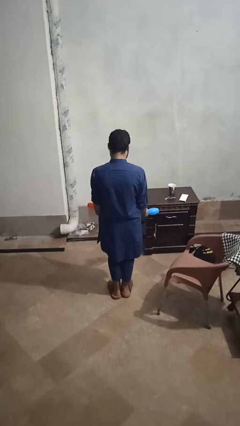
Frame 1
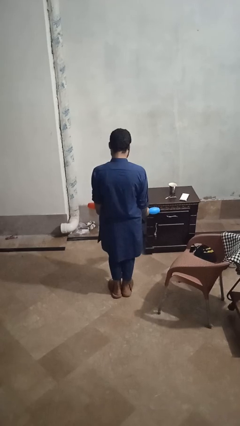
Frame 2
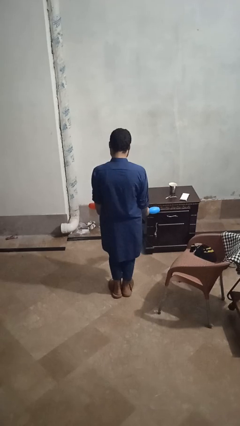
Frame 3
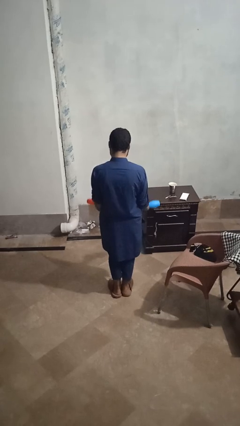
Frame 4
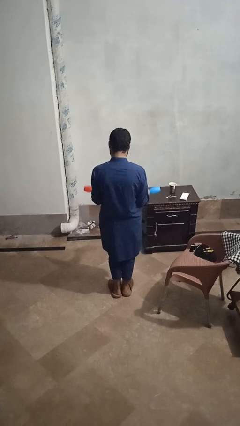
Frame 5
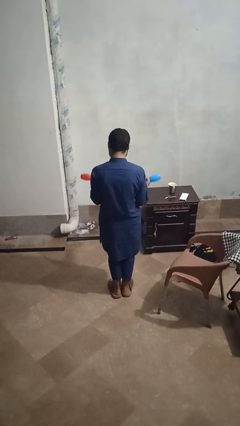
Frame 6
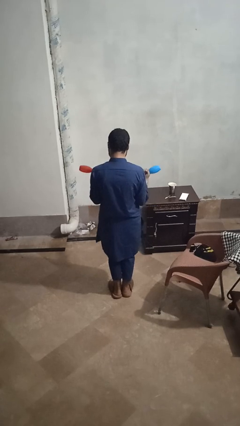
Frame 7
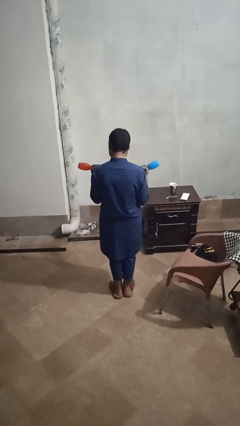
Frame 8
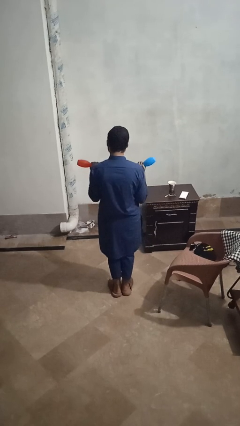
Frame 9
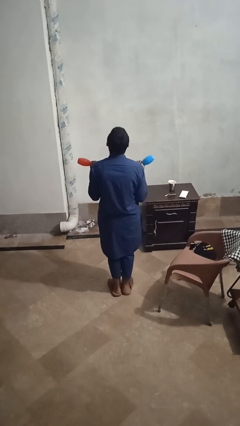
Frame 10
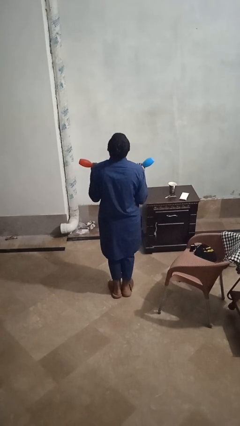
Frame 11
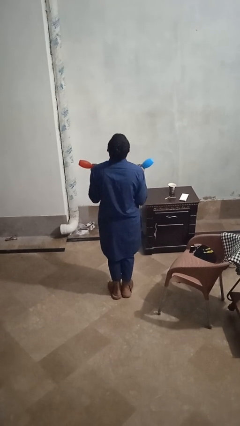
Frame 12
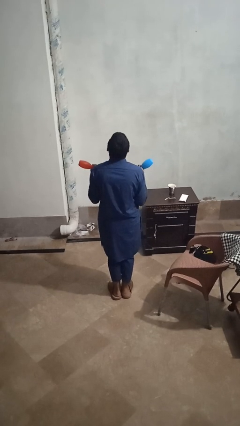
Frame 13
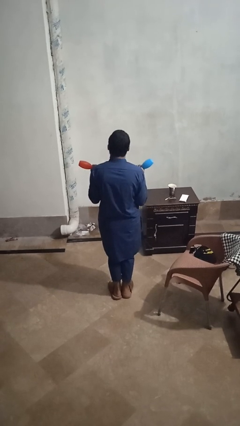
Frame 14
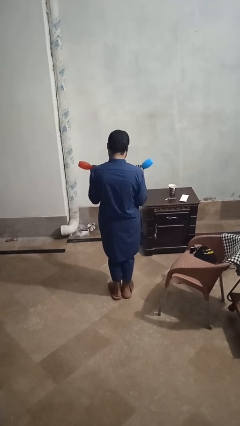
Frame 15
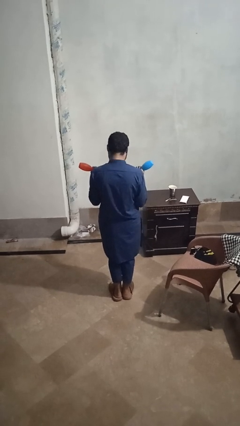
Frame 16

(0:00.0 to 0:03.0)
person lifts dumbbells

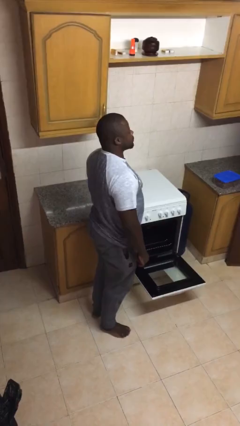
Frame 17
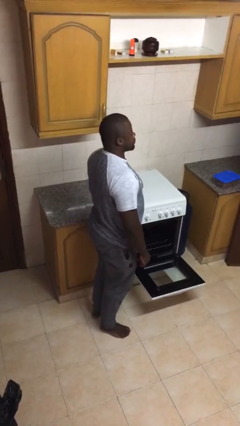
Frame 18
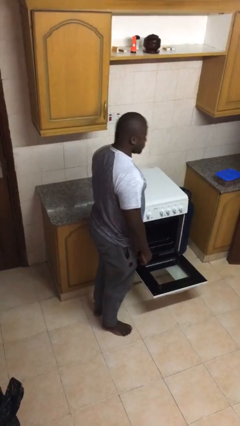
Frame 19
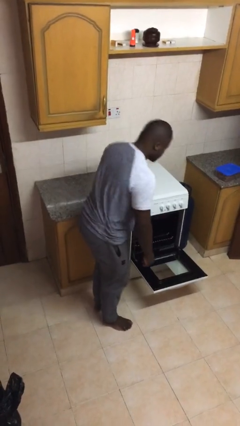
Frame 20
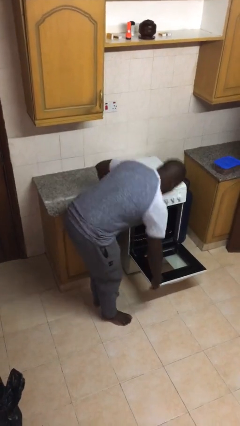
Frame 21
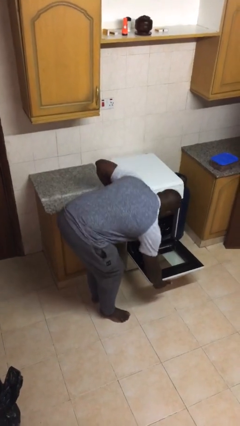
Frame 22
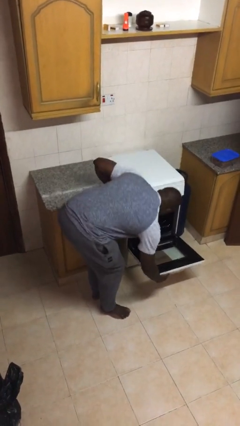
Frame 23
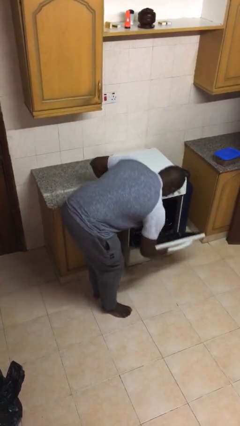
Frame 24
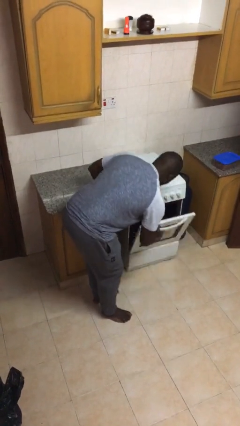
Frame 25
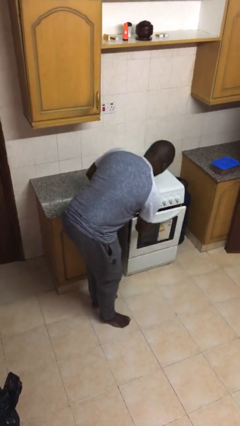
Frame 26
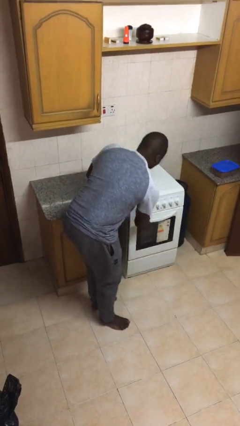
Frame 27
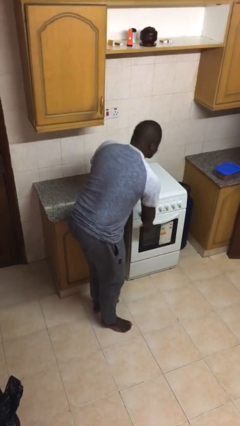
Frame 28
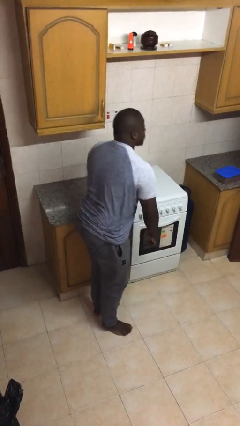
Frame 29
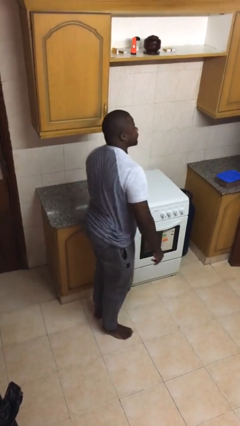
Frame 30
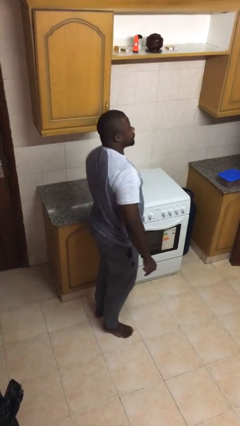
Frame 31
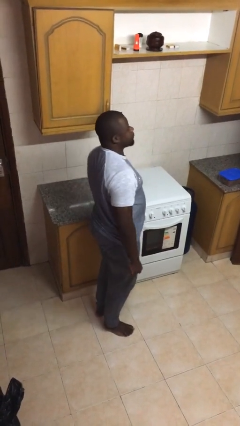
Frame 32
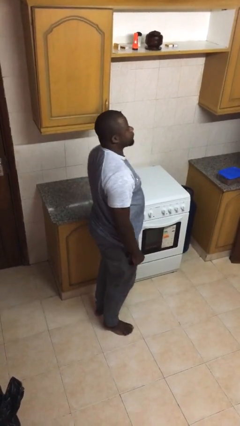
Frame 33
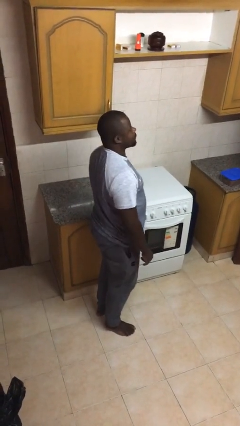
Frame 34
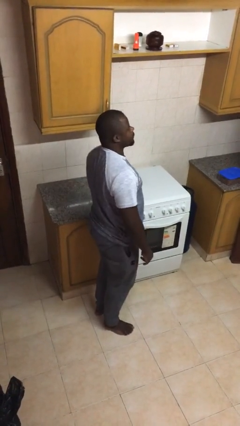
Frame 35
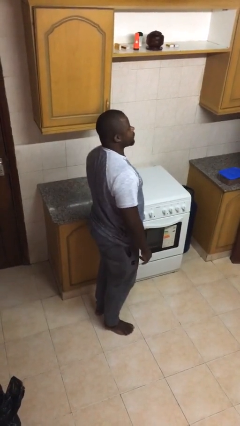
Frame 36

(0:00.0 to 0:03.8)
person closes oven door

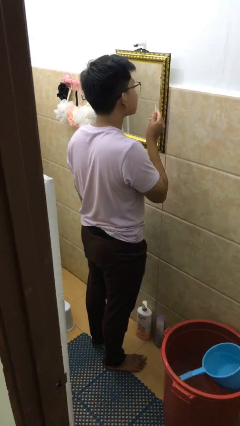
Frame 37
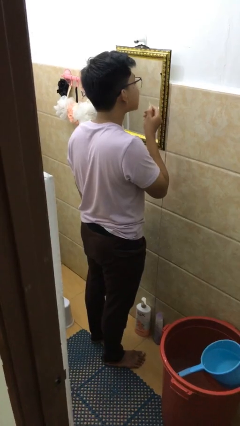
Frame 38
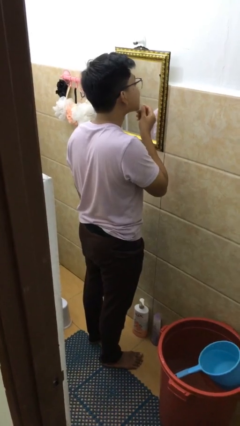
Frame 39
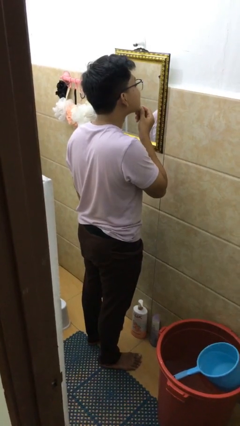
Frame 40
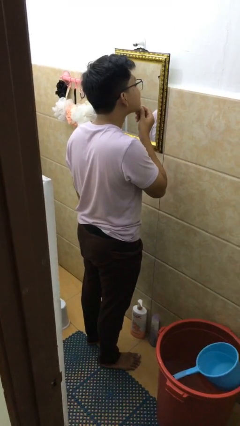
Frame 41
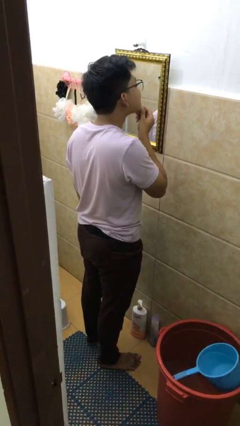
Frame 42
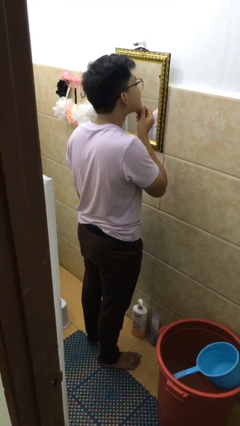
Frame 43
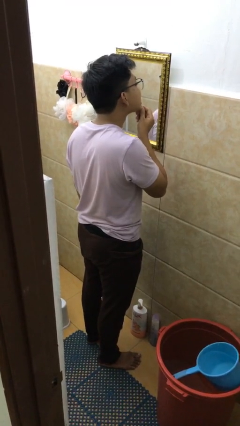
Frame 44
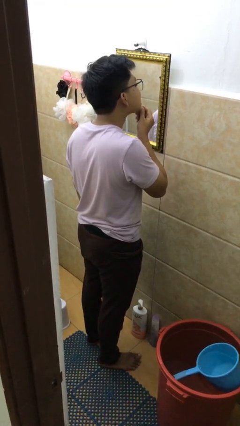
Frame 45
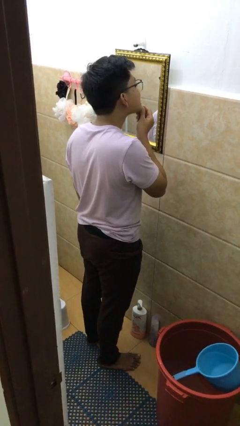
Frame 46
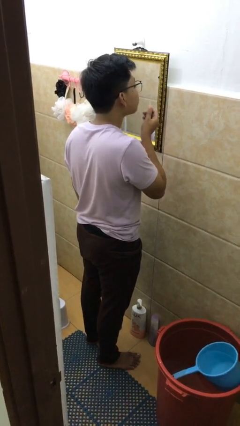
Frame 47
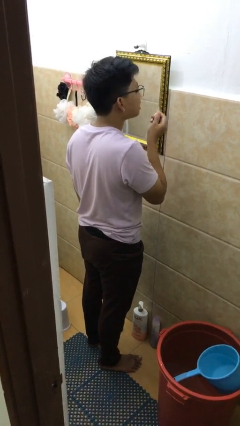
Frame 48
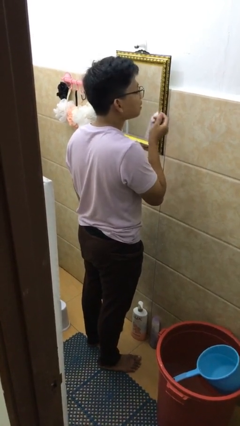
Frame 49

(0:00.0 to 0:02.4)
person flosses

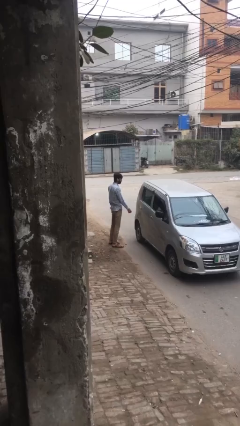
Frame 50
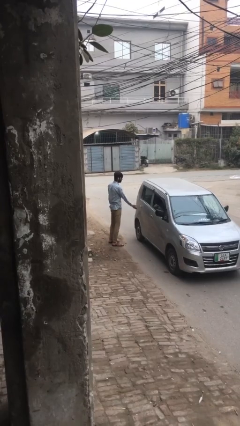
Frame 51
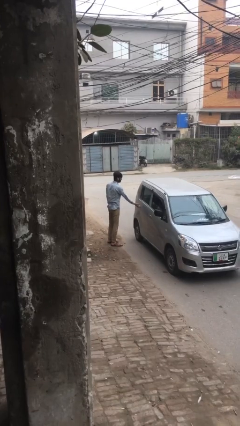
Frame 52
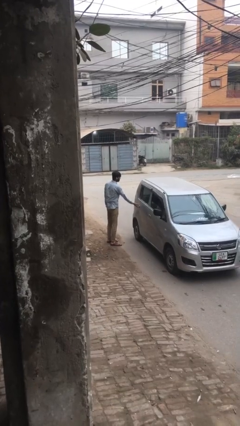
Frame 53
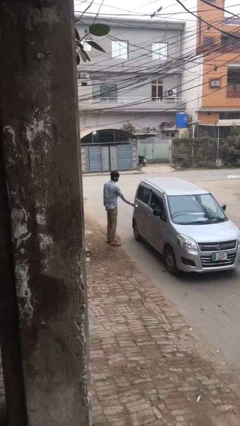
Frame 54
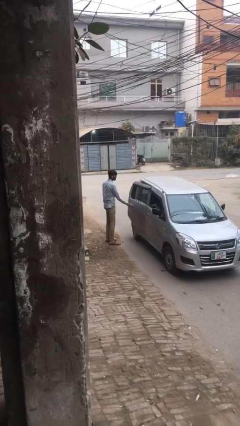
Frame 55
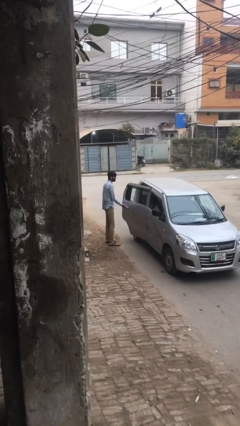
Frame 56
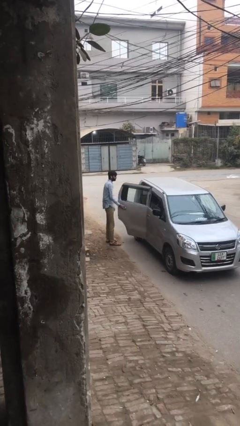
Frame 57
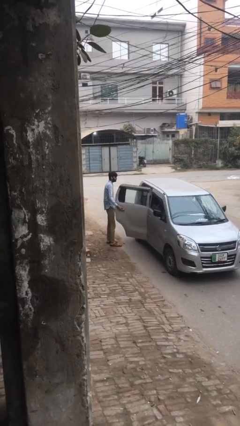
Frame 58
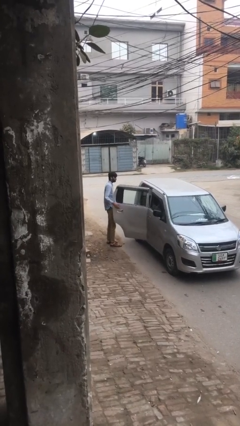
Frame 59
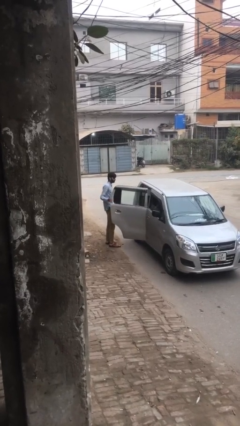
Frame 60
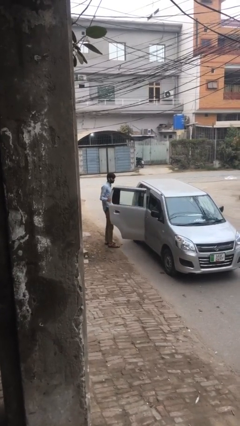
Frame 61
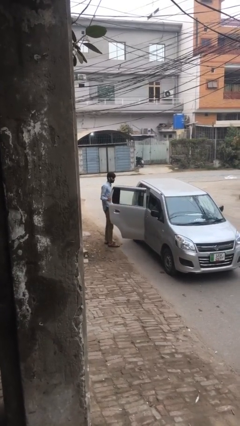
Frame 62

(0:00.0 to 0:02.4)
person opens car door

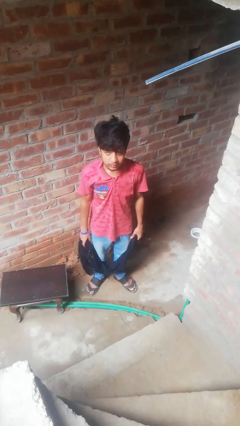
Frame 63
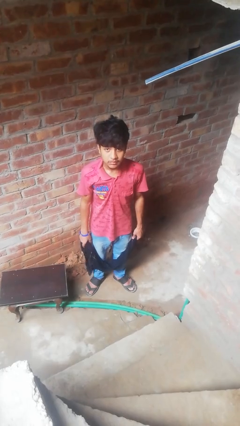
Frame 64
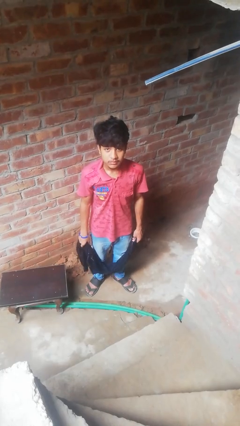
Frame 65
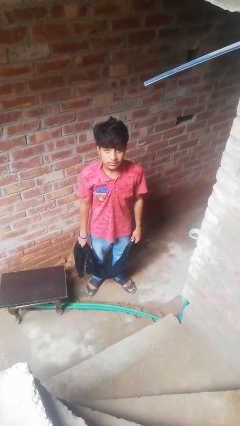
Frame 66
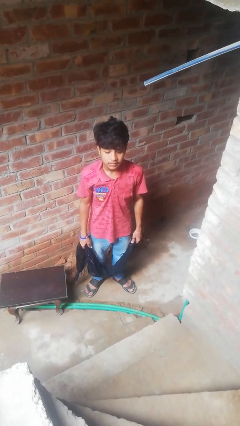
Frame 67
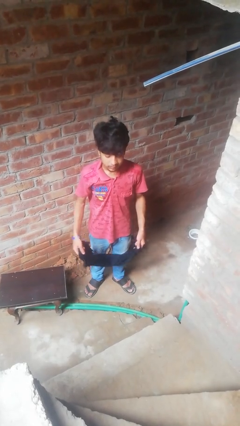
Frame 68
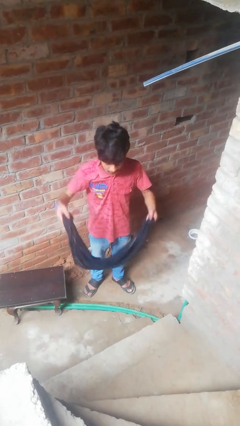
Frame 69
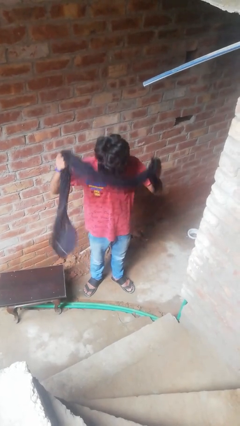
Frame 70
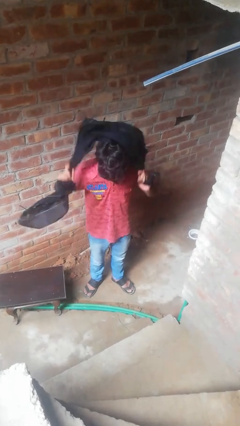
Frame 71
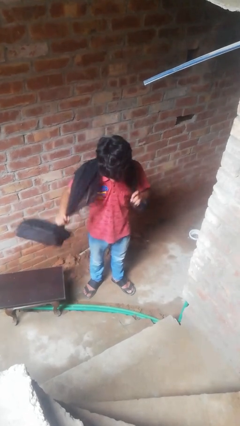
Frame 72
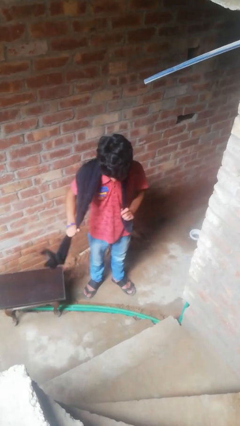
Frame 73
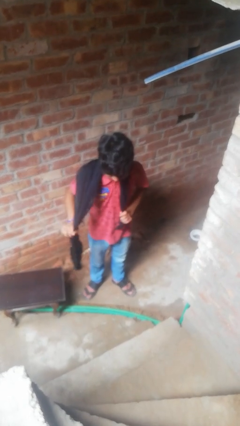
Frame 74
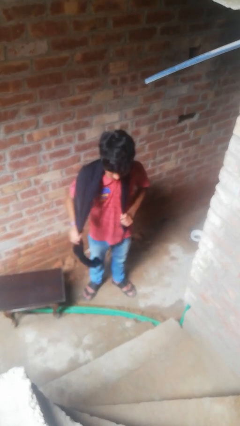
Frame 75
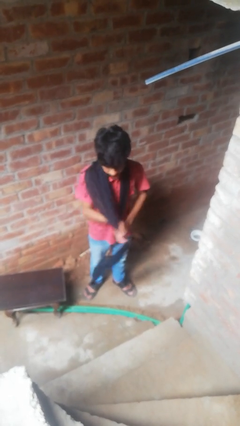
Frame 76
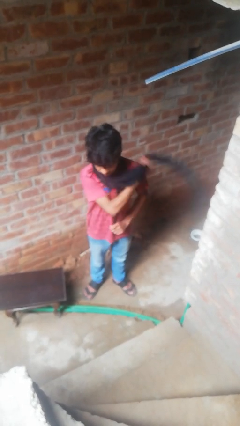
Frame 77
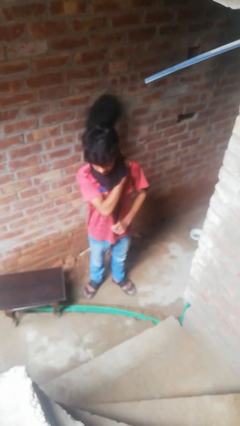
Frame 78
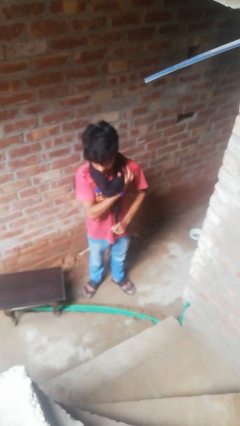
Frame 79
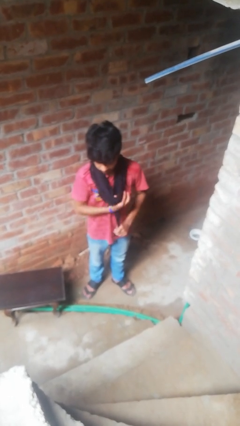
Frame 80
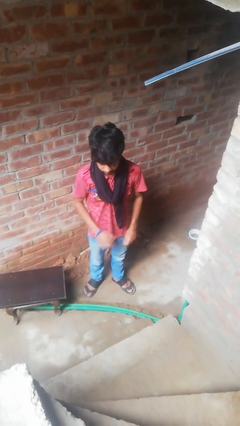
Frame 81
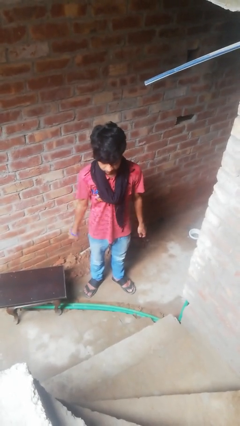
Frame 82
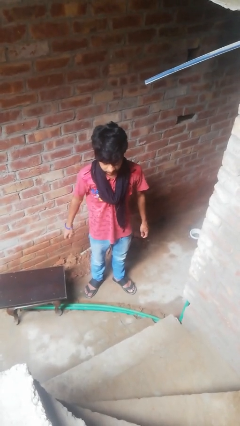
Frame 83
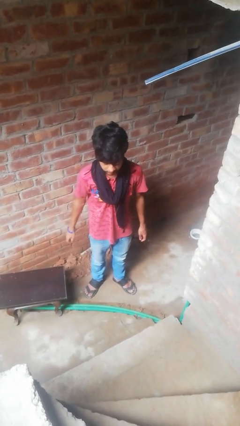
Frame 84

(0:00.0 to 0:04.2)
person puts on scarf

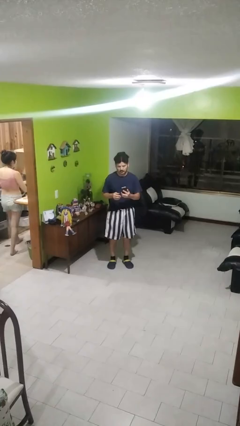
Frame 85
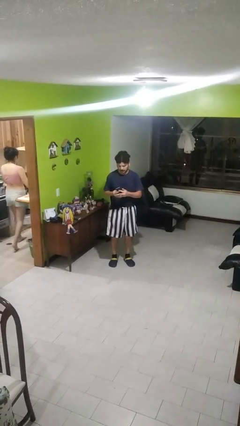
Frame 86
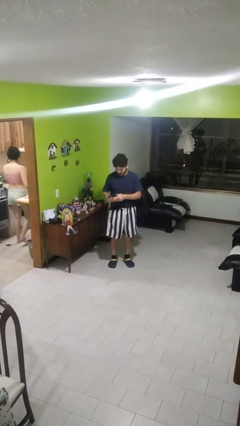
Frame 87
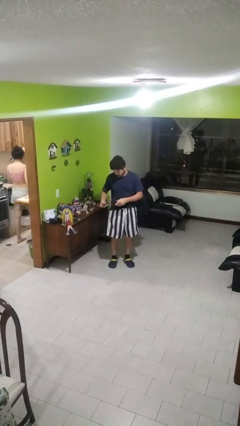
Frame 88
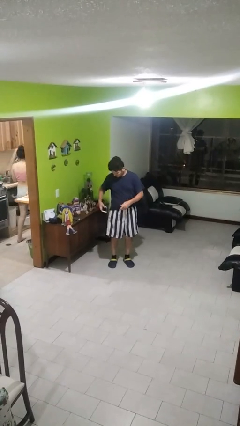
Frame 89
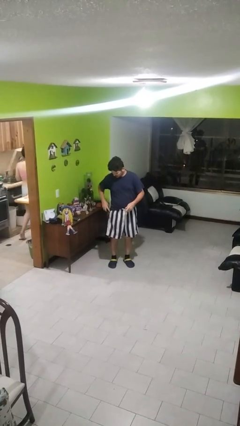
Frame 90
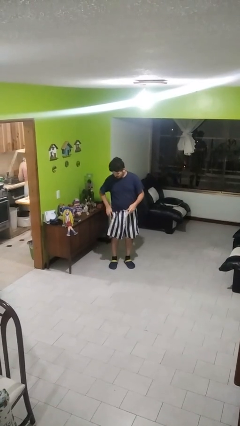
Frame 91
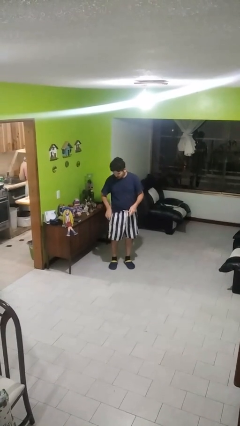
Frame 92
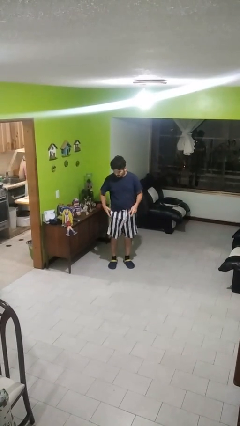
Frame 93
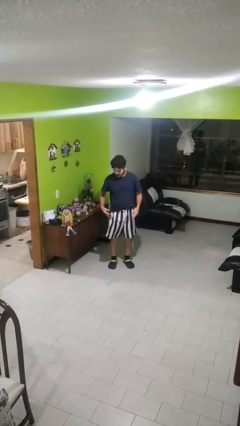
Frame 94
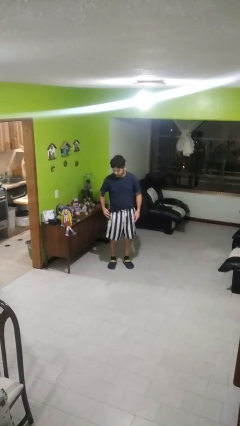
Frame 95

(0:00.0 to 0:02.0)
person puts phone into pocket
